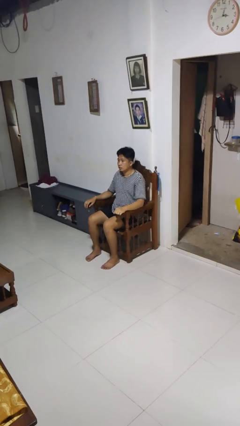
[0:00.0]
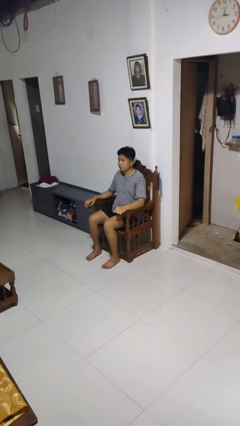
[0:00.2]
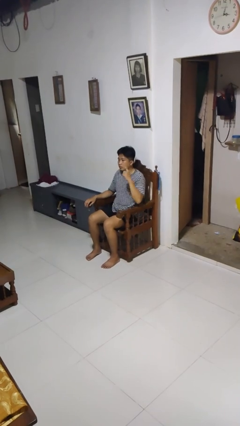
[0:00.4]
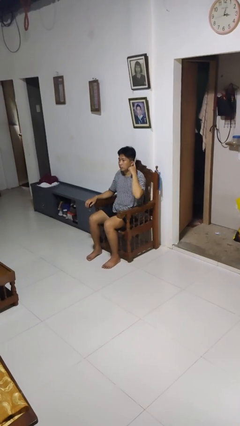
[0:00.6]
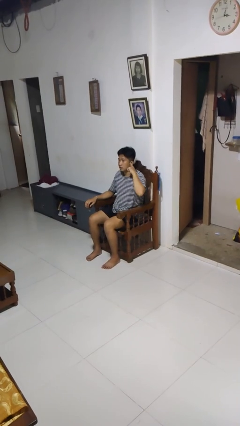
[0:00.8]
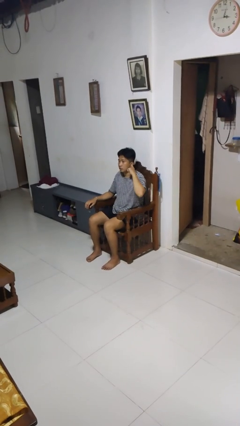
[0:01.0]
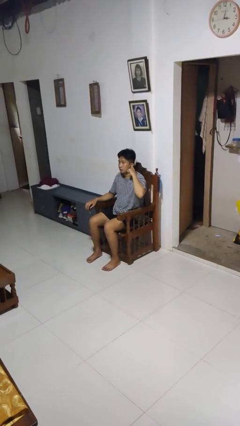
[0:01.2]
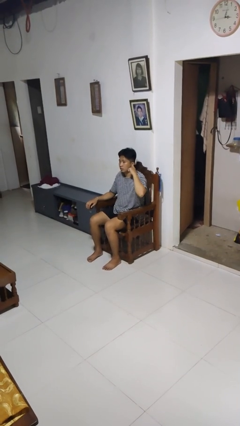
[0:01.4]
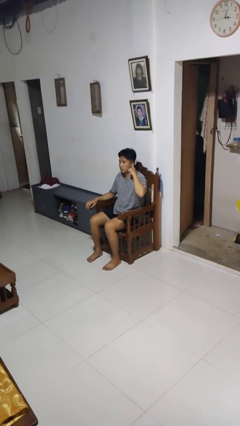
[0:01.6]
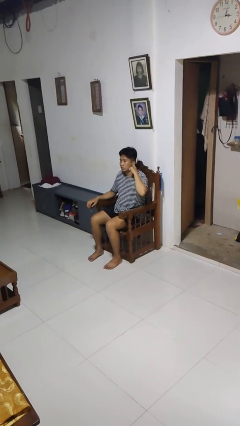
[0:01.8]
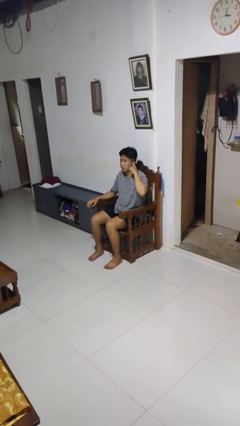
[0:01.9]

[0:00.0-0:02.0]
person gestures listen closely

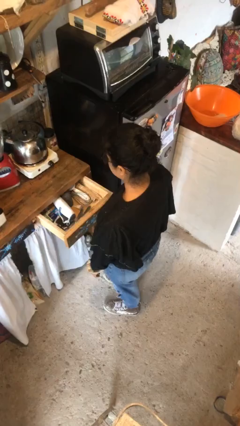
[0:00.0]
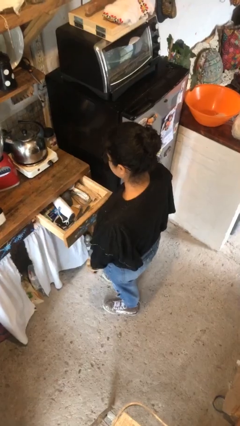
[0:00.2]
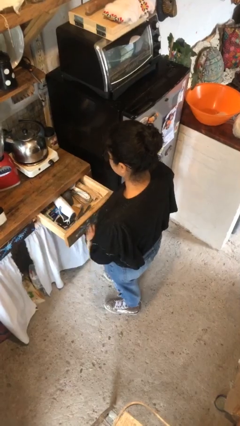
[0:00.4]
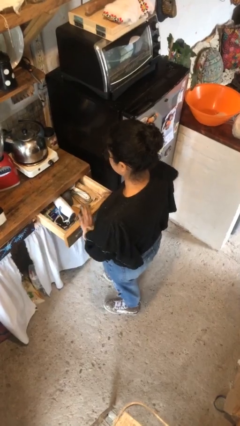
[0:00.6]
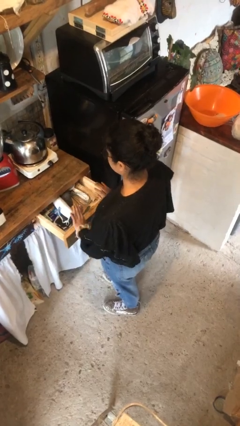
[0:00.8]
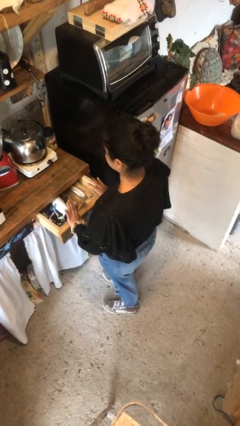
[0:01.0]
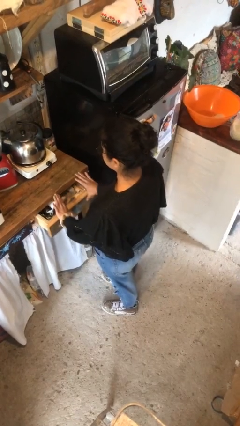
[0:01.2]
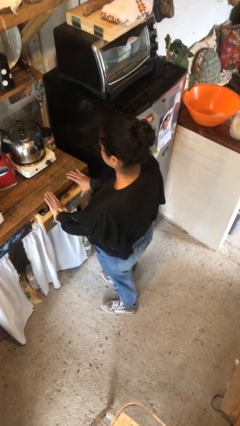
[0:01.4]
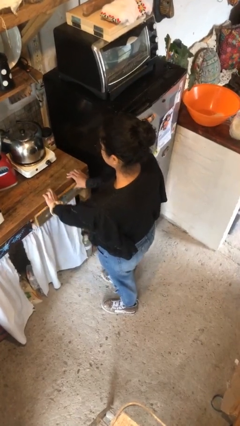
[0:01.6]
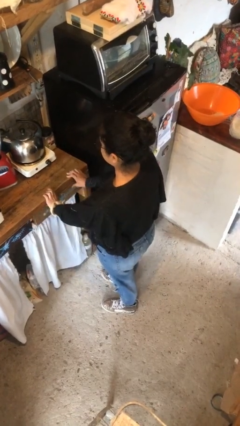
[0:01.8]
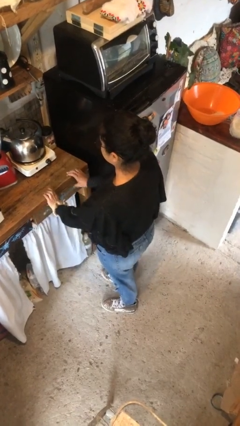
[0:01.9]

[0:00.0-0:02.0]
person closes kitchen drawer

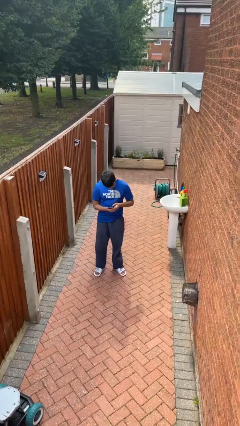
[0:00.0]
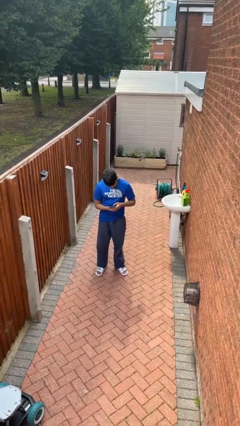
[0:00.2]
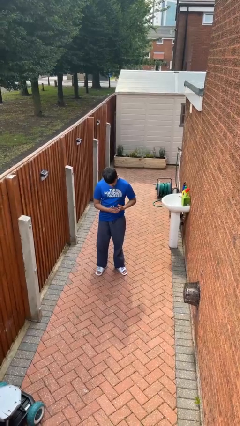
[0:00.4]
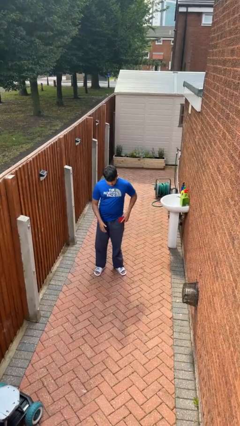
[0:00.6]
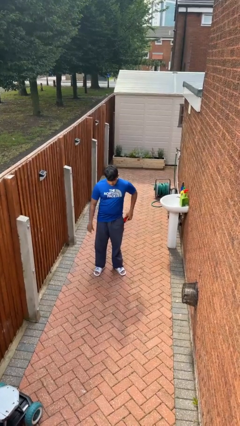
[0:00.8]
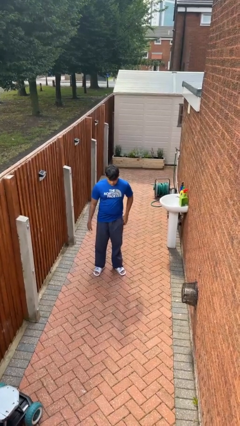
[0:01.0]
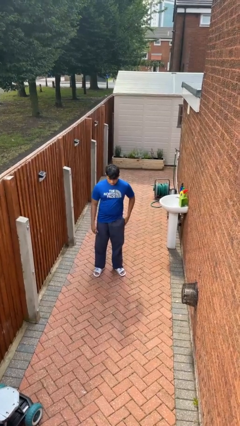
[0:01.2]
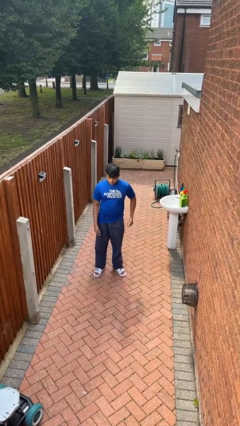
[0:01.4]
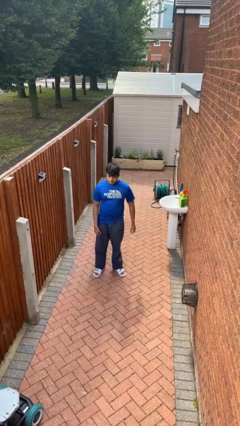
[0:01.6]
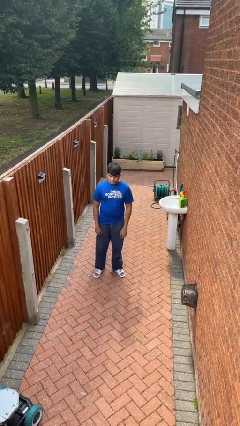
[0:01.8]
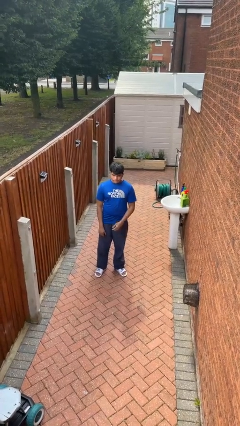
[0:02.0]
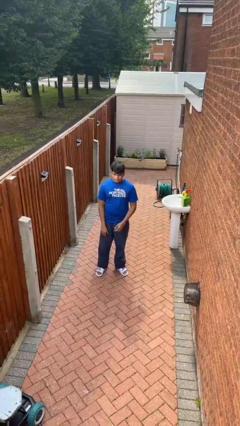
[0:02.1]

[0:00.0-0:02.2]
person puts phone into pocket

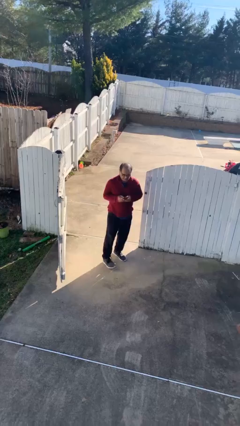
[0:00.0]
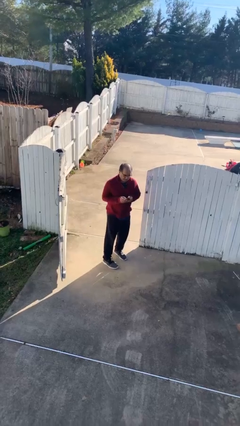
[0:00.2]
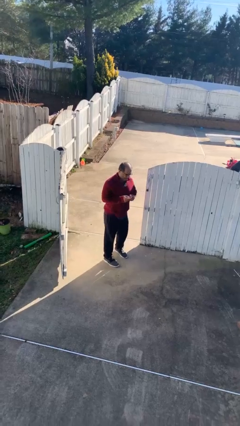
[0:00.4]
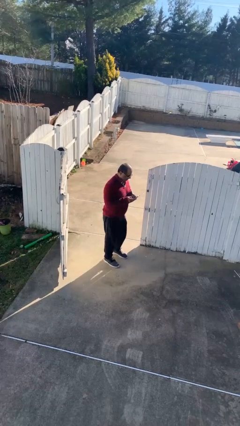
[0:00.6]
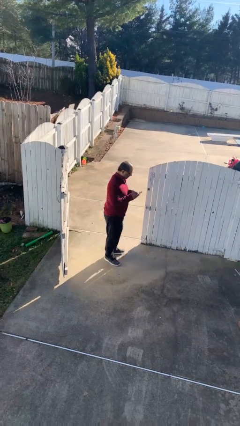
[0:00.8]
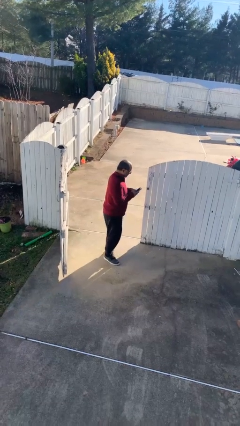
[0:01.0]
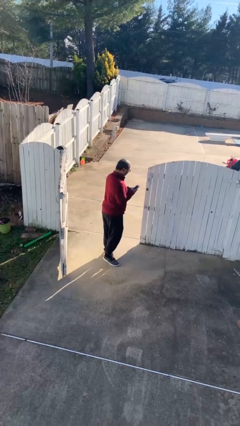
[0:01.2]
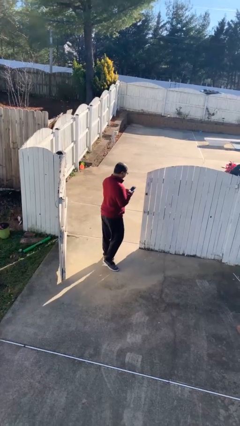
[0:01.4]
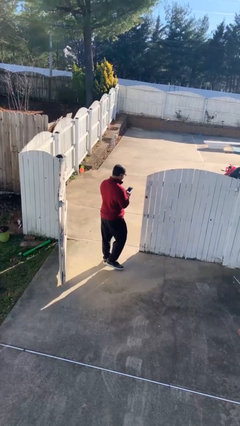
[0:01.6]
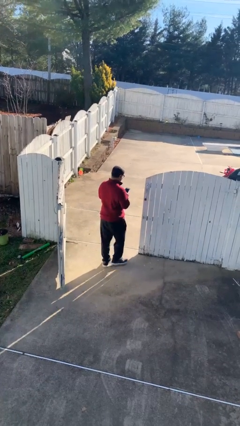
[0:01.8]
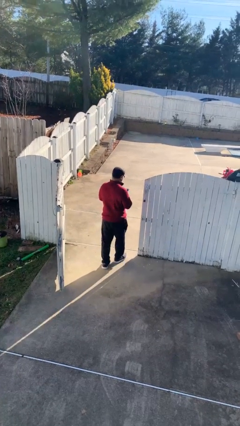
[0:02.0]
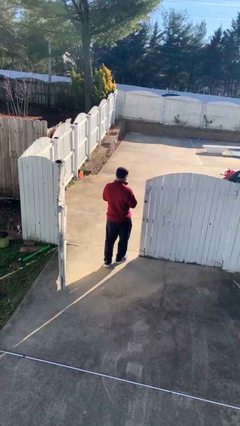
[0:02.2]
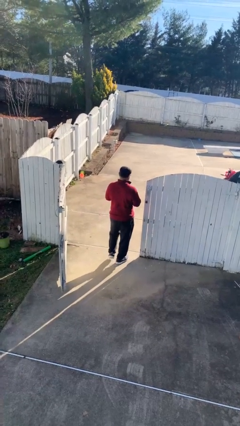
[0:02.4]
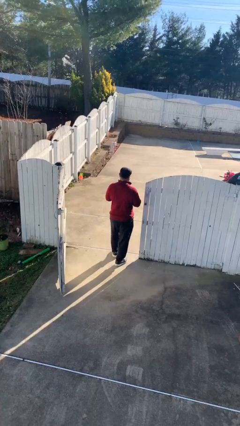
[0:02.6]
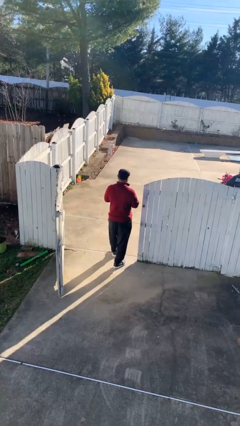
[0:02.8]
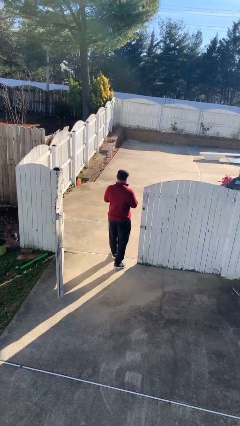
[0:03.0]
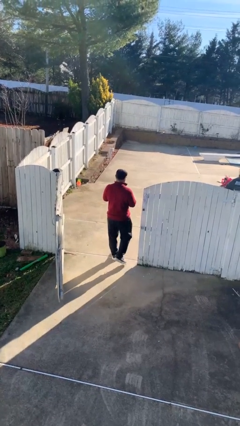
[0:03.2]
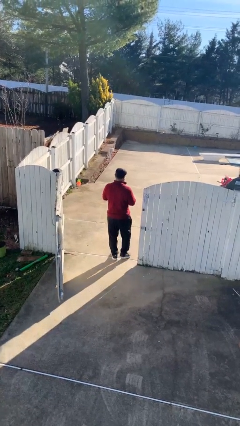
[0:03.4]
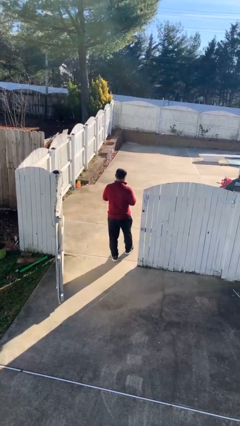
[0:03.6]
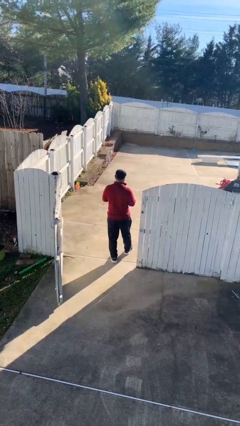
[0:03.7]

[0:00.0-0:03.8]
person exits scene through structure

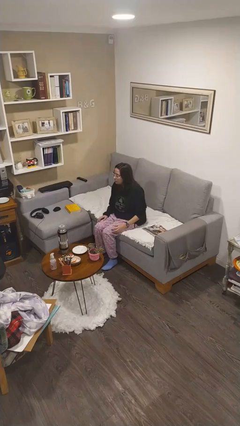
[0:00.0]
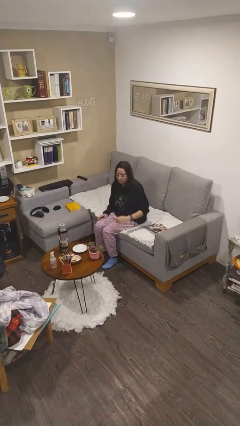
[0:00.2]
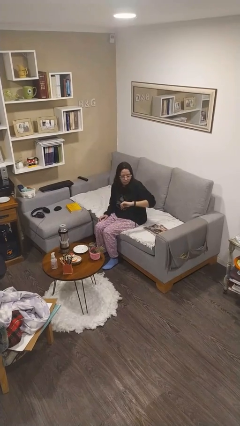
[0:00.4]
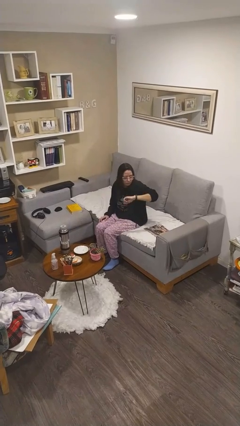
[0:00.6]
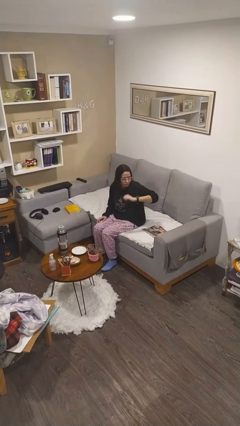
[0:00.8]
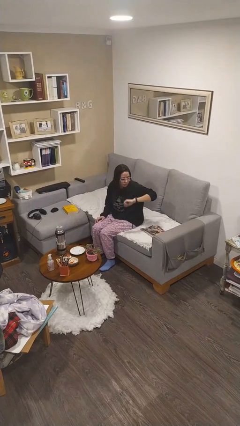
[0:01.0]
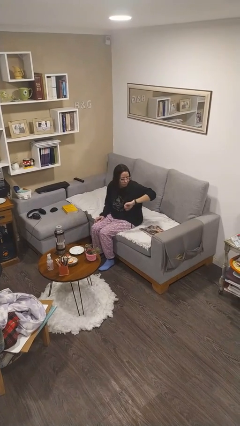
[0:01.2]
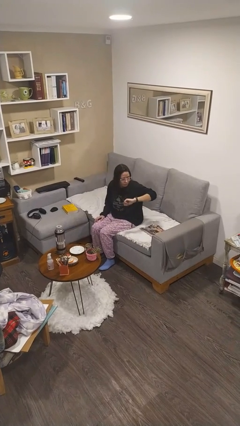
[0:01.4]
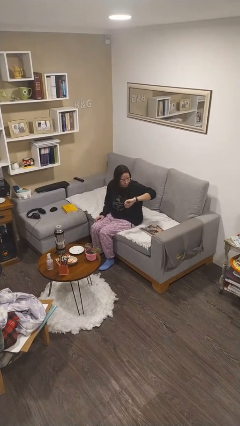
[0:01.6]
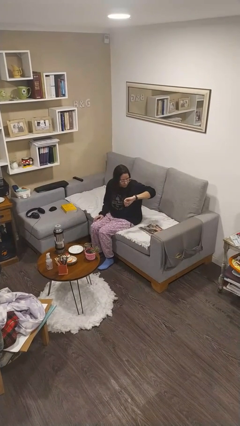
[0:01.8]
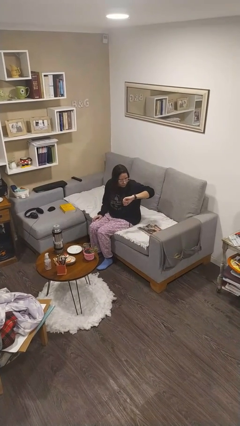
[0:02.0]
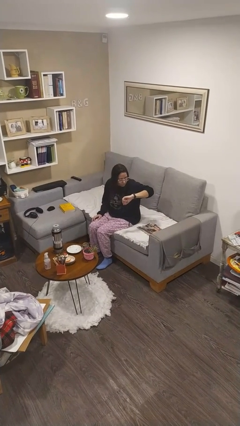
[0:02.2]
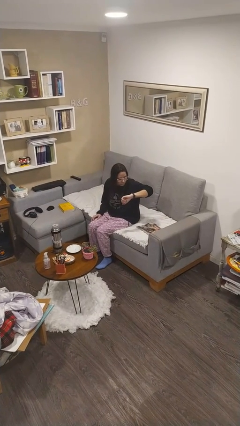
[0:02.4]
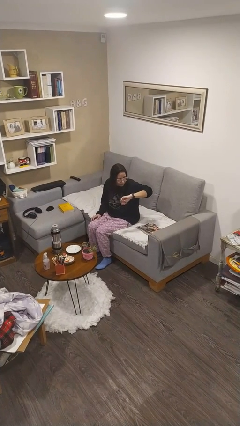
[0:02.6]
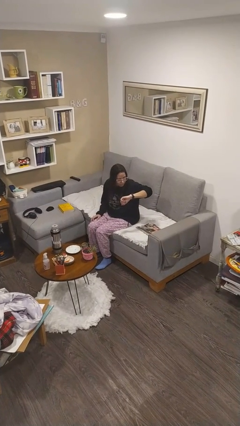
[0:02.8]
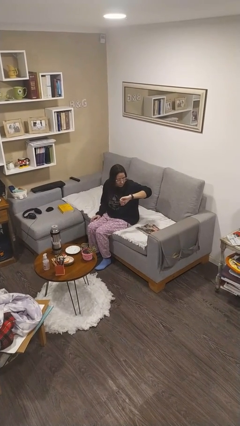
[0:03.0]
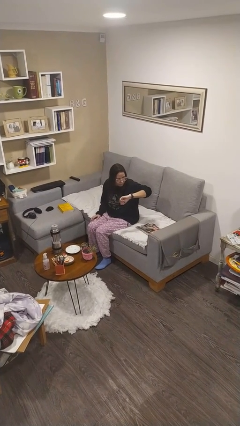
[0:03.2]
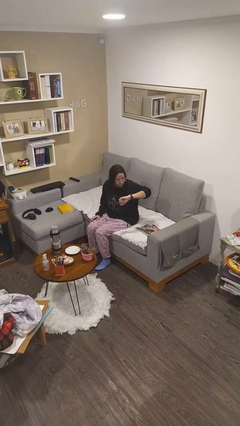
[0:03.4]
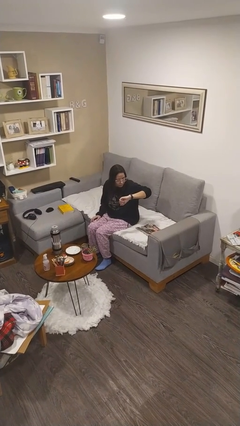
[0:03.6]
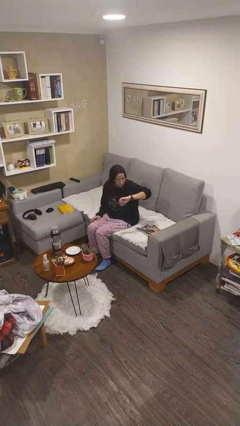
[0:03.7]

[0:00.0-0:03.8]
person looks at wristwatch

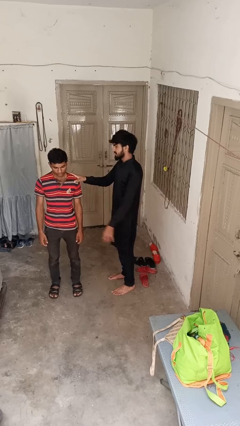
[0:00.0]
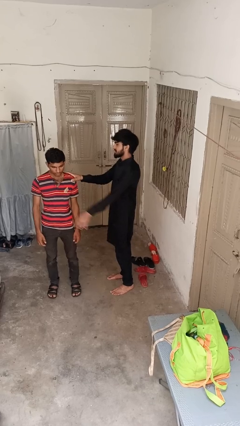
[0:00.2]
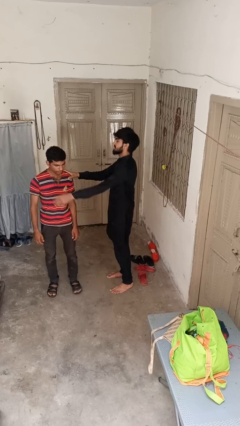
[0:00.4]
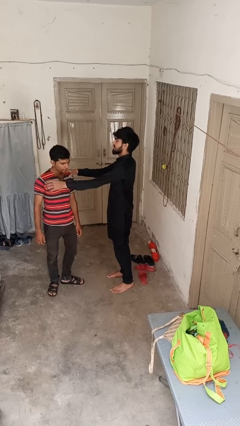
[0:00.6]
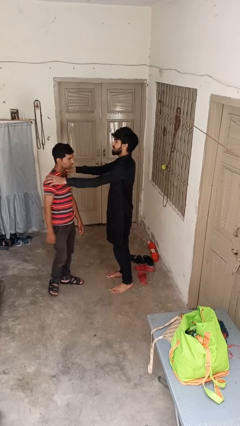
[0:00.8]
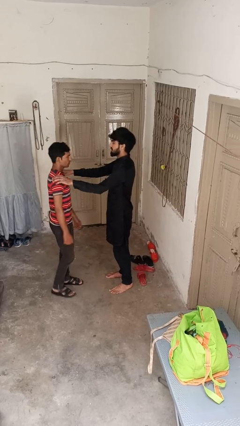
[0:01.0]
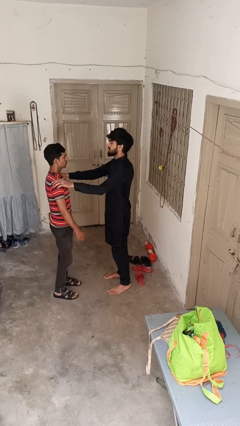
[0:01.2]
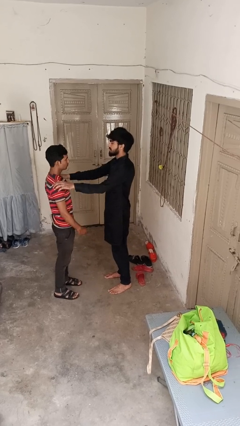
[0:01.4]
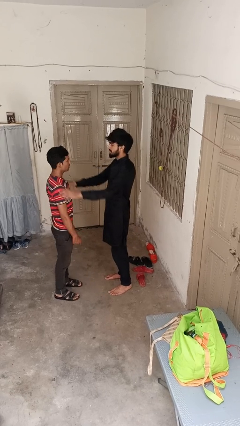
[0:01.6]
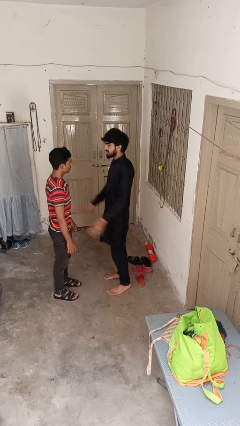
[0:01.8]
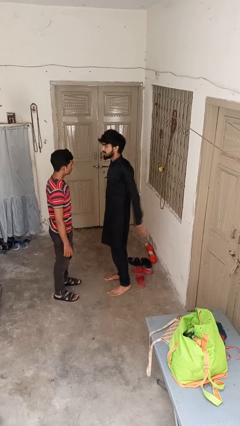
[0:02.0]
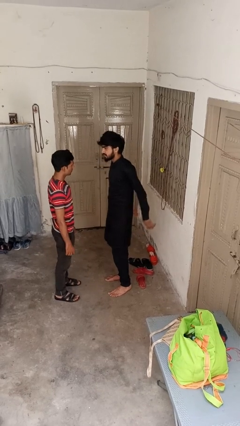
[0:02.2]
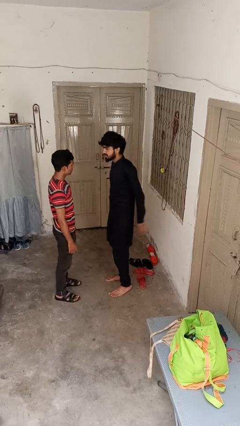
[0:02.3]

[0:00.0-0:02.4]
person spins person around

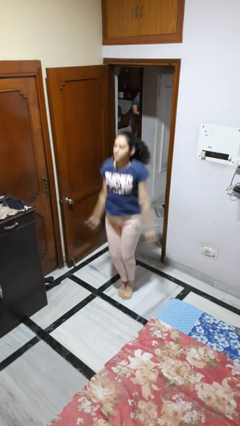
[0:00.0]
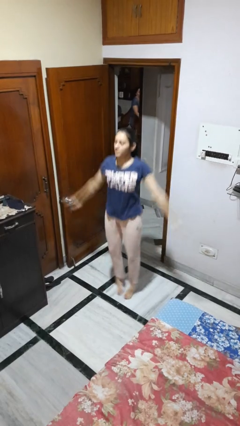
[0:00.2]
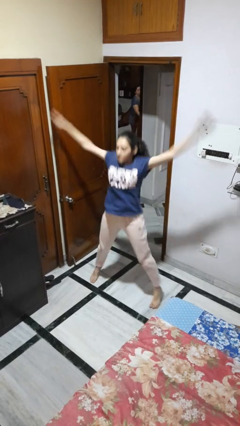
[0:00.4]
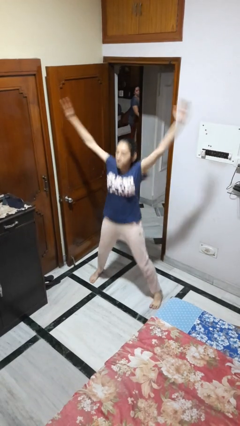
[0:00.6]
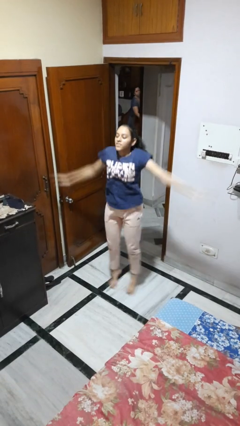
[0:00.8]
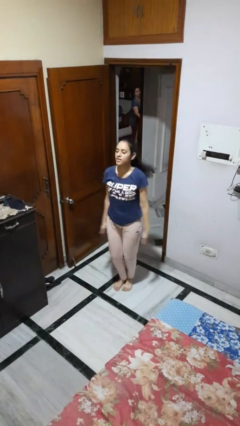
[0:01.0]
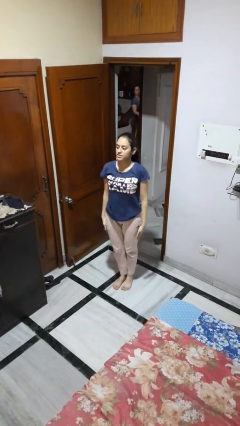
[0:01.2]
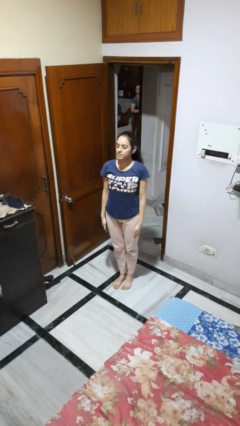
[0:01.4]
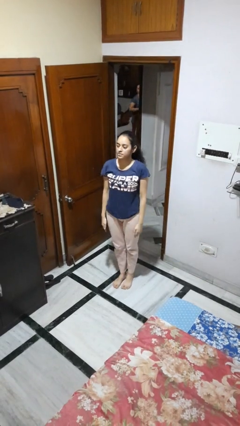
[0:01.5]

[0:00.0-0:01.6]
person exercises with jumping jacks
